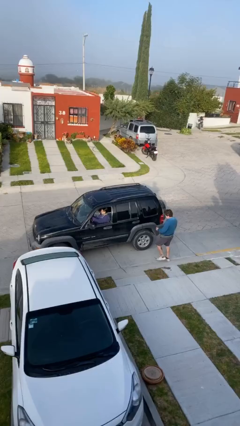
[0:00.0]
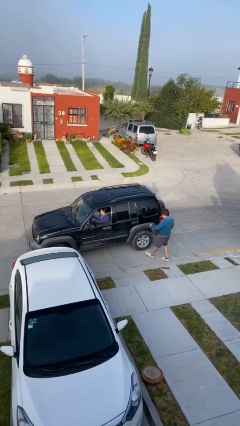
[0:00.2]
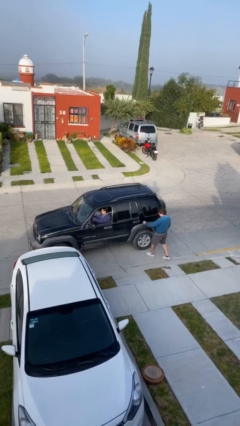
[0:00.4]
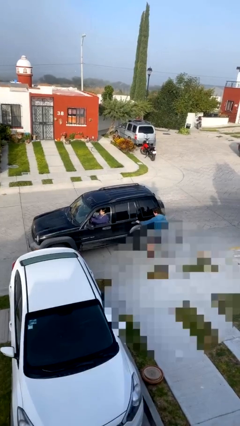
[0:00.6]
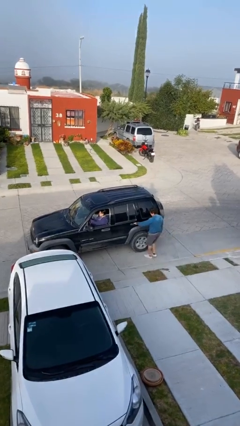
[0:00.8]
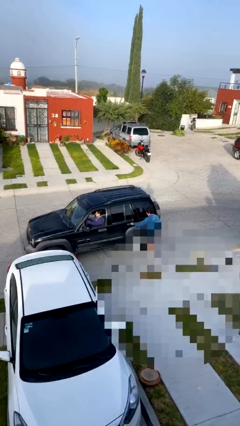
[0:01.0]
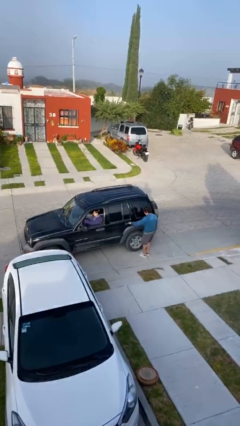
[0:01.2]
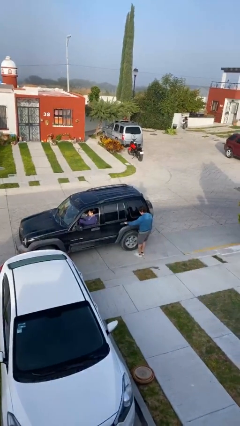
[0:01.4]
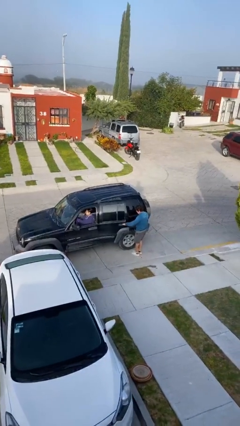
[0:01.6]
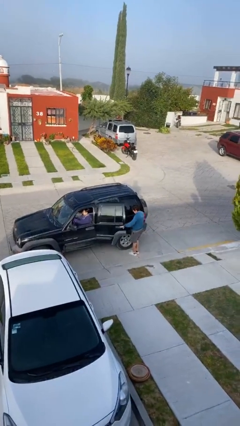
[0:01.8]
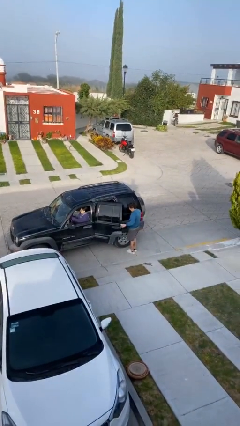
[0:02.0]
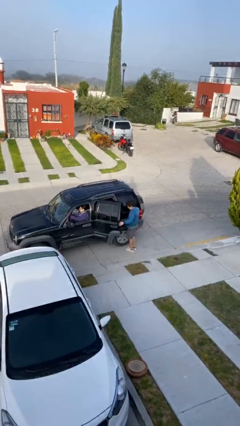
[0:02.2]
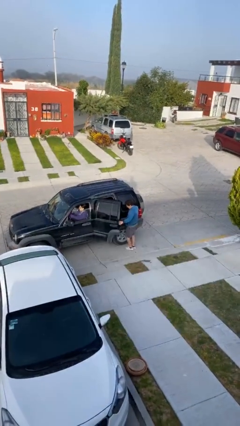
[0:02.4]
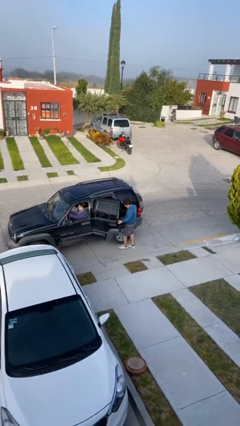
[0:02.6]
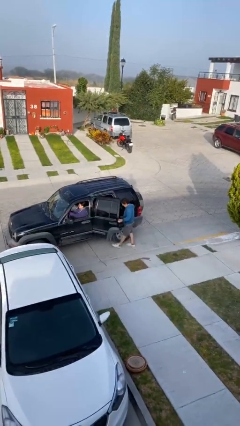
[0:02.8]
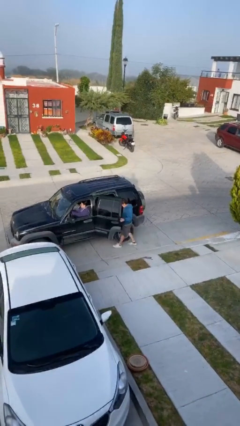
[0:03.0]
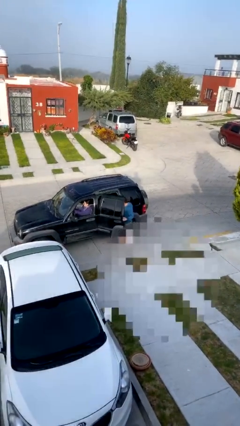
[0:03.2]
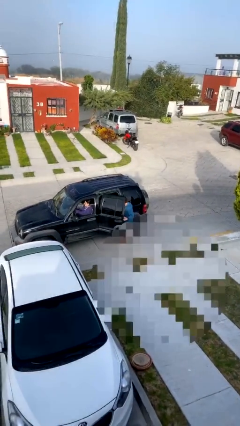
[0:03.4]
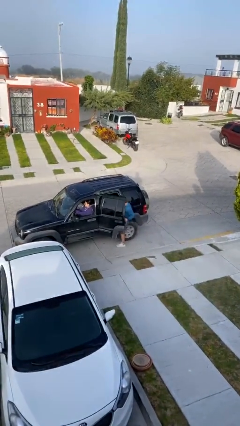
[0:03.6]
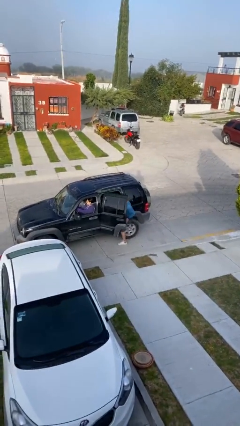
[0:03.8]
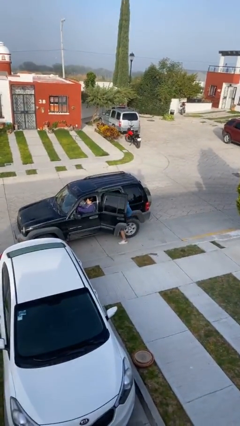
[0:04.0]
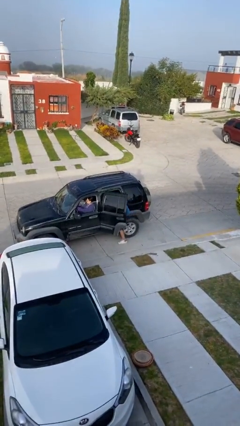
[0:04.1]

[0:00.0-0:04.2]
car picks up person

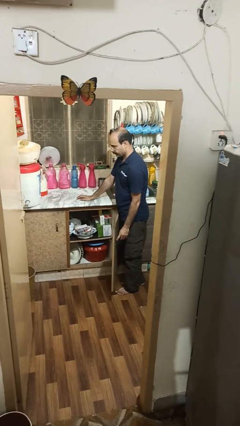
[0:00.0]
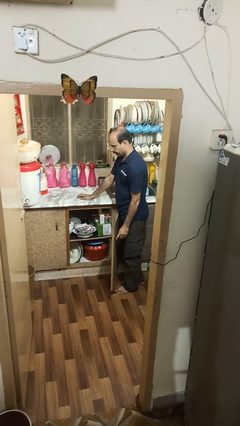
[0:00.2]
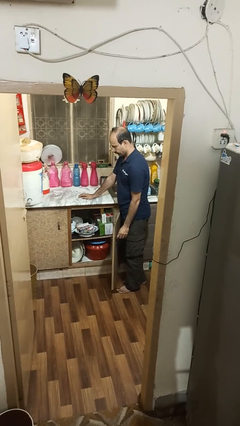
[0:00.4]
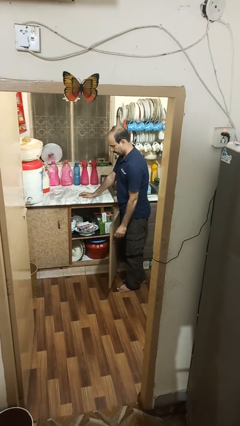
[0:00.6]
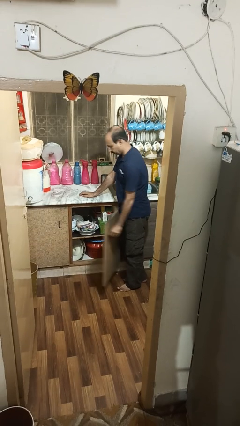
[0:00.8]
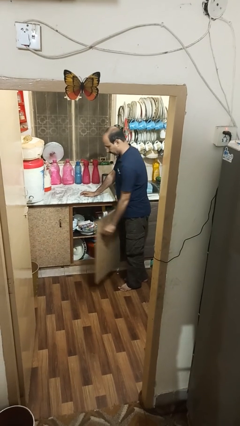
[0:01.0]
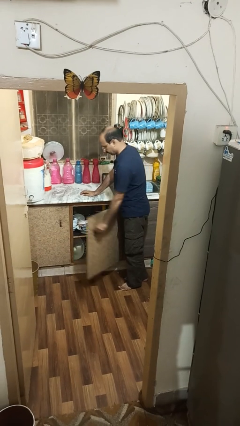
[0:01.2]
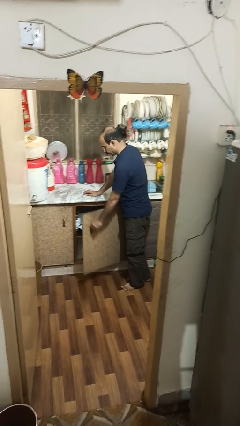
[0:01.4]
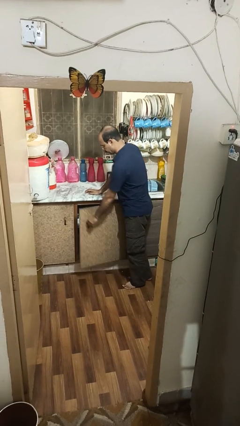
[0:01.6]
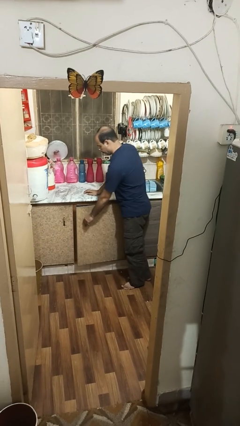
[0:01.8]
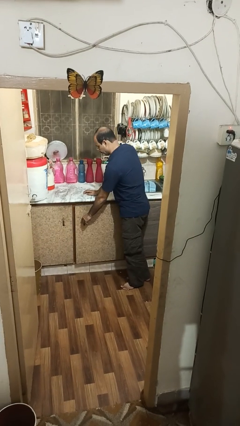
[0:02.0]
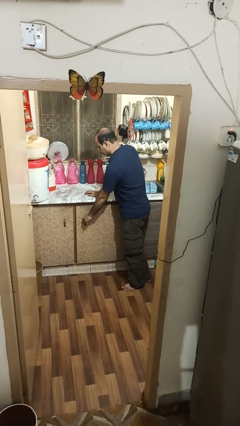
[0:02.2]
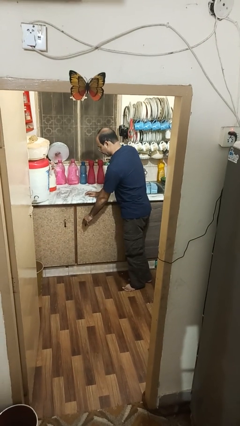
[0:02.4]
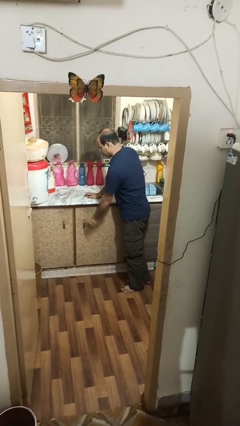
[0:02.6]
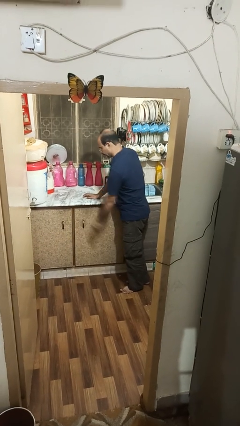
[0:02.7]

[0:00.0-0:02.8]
person closes cabinet

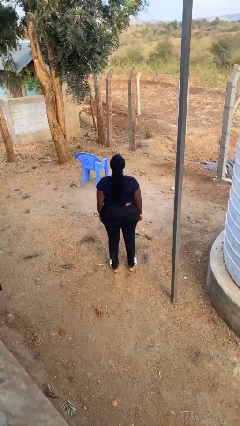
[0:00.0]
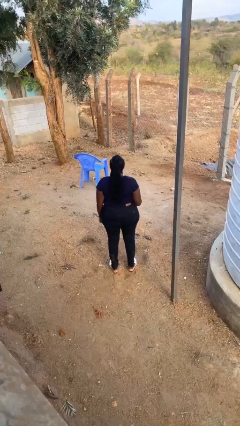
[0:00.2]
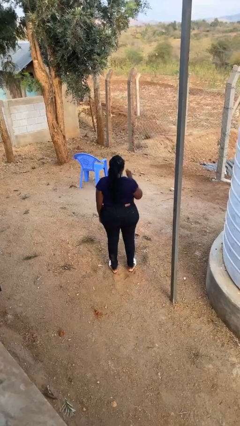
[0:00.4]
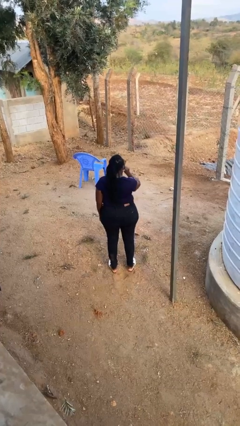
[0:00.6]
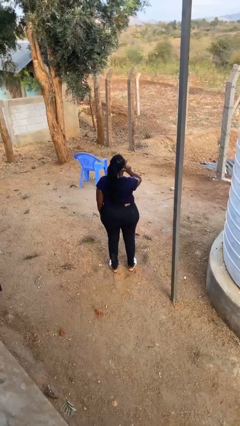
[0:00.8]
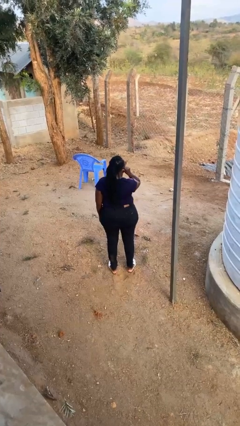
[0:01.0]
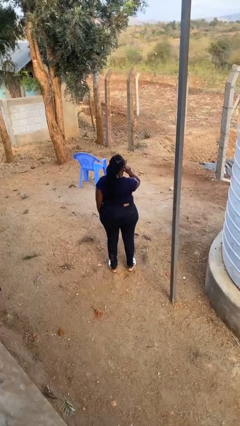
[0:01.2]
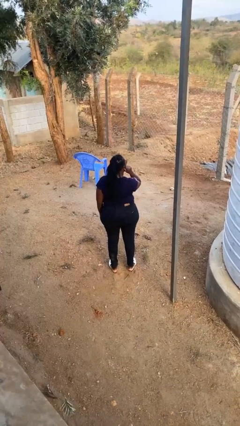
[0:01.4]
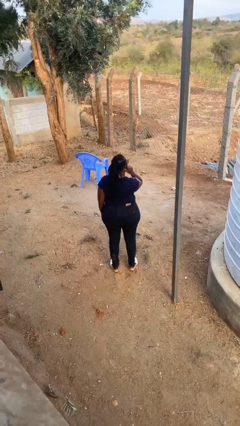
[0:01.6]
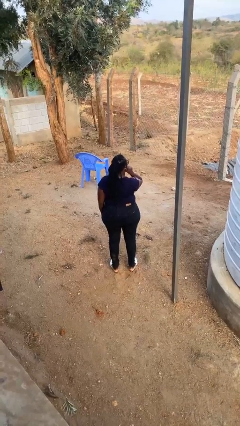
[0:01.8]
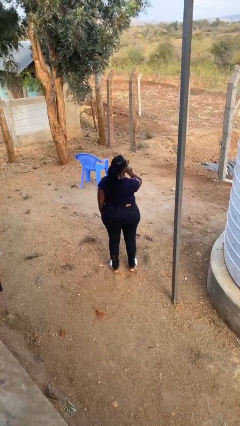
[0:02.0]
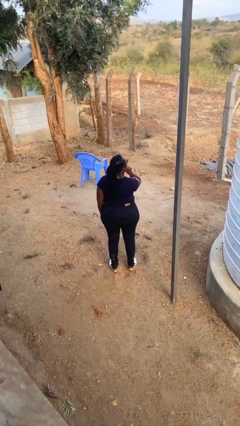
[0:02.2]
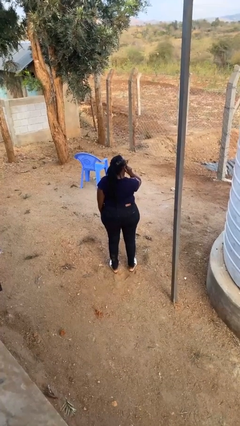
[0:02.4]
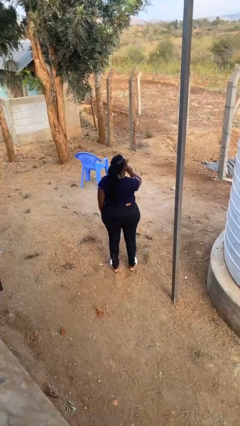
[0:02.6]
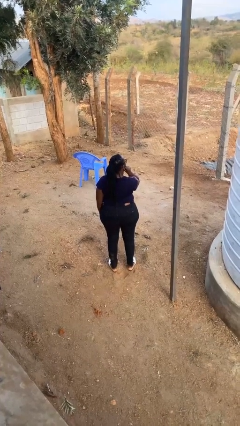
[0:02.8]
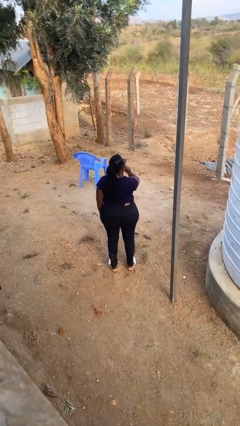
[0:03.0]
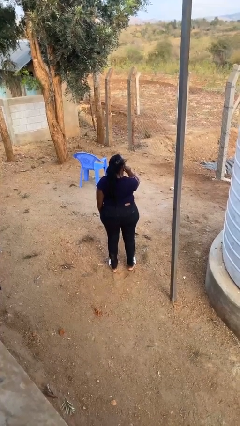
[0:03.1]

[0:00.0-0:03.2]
person touches earlobe

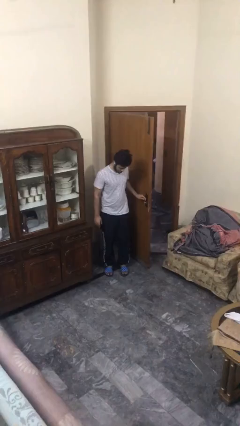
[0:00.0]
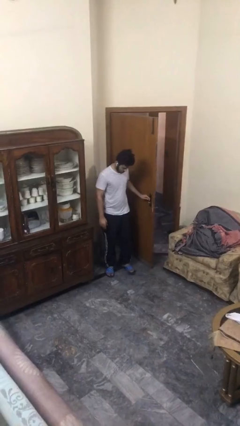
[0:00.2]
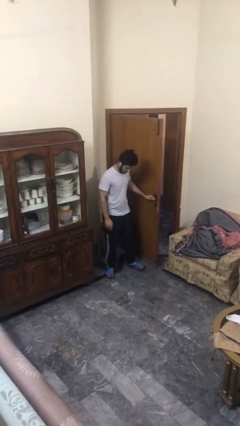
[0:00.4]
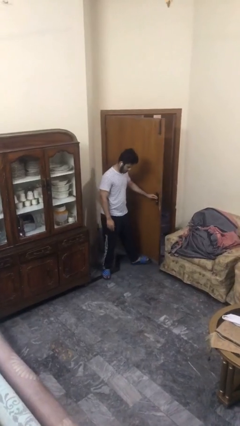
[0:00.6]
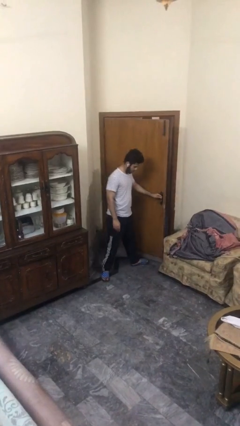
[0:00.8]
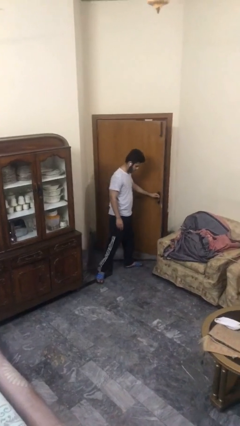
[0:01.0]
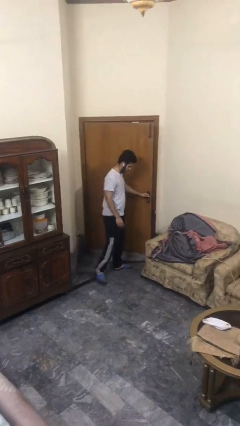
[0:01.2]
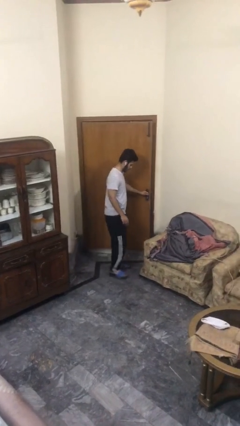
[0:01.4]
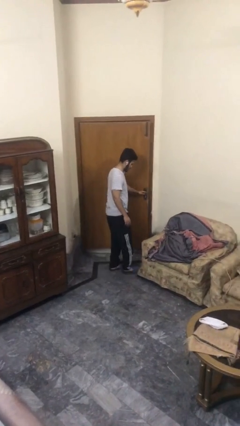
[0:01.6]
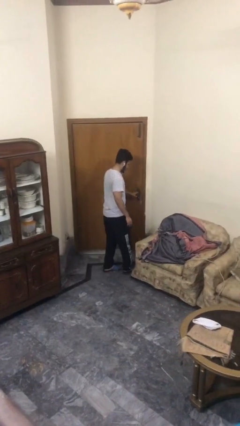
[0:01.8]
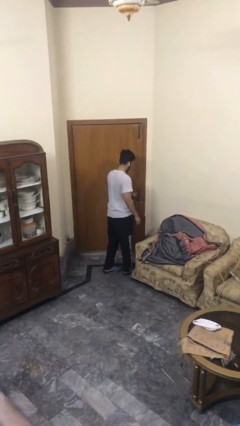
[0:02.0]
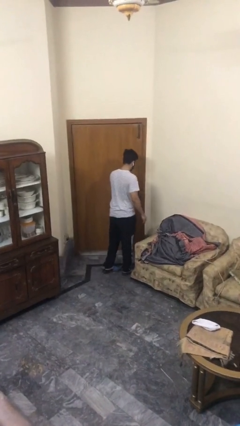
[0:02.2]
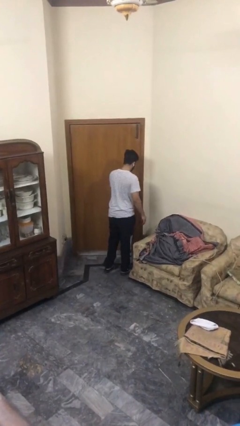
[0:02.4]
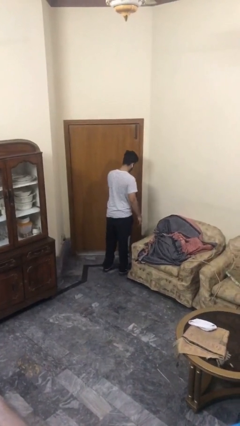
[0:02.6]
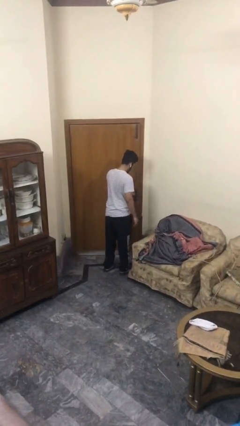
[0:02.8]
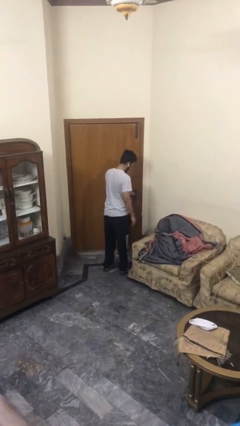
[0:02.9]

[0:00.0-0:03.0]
person closes facility door

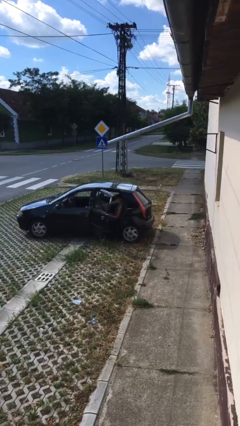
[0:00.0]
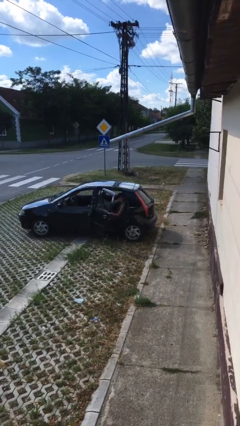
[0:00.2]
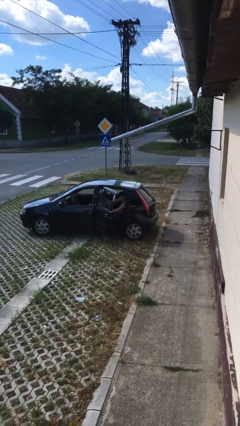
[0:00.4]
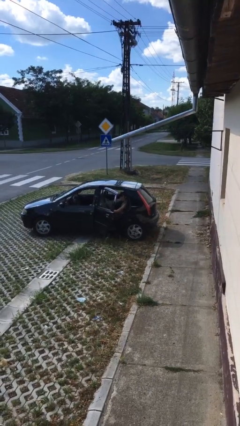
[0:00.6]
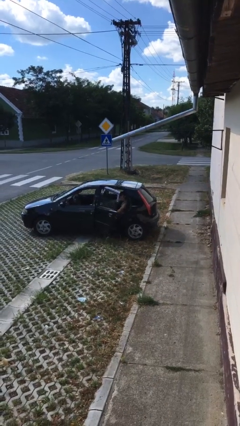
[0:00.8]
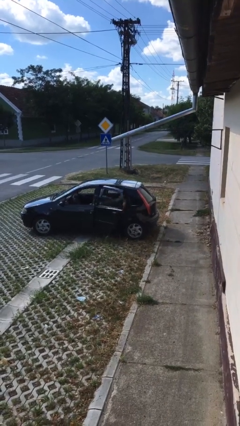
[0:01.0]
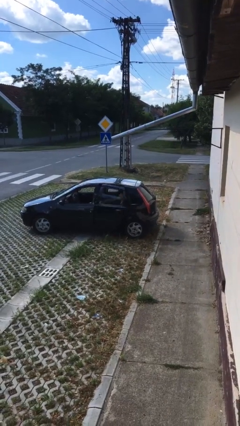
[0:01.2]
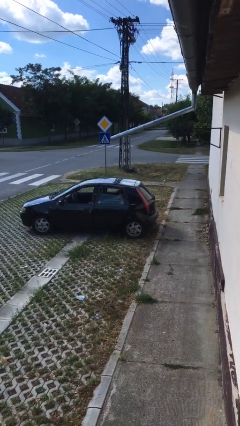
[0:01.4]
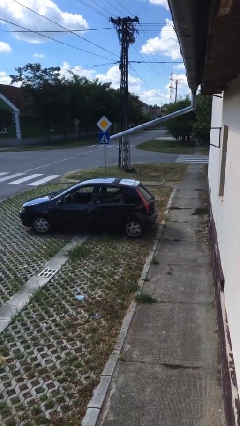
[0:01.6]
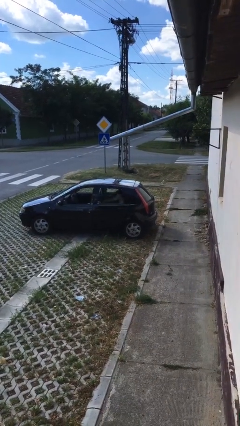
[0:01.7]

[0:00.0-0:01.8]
person closes car door

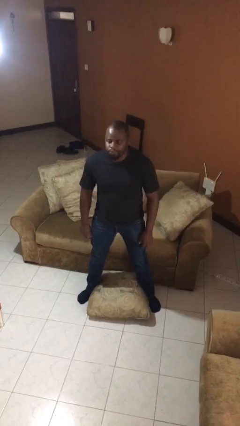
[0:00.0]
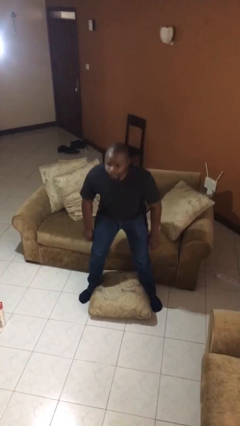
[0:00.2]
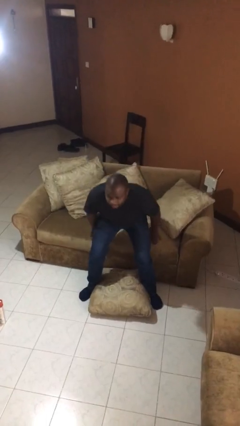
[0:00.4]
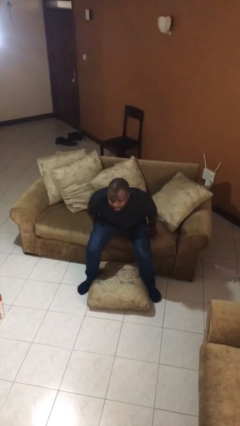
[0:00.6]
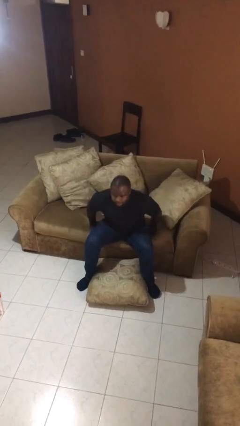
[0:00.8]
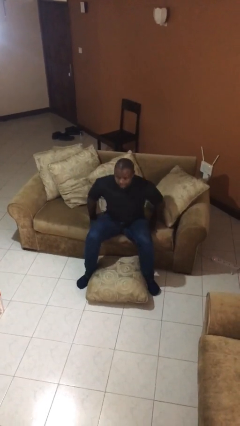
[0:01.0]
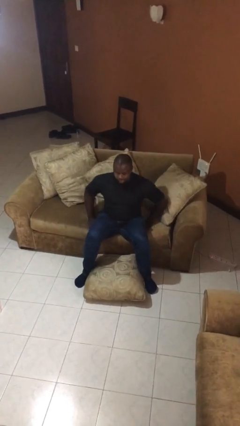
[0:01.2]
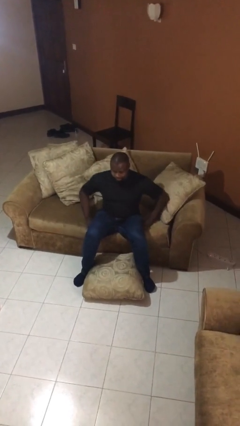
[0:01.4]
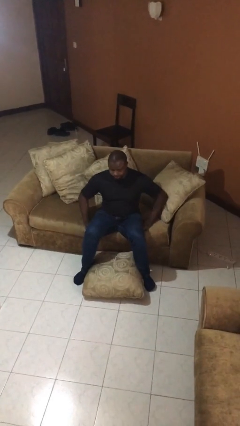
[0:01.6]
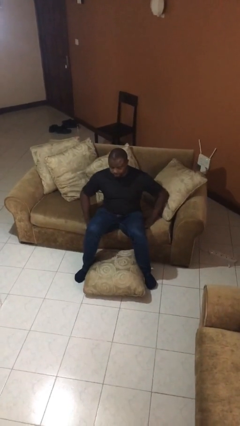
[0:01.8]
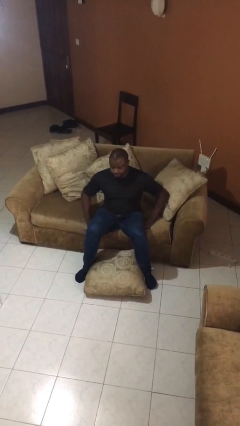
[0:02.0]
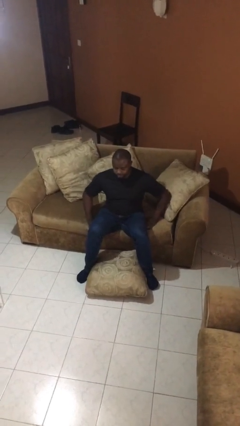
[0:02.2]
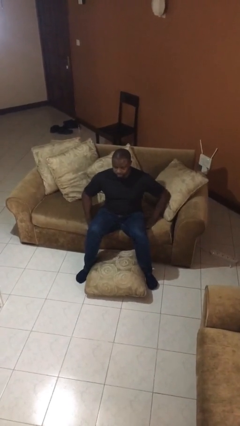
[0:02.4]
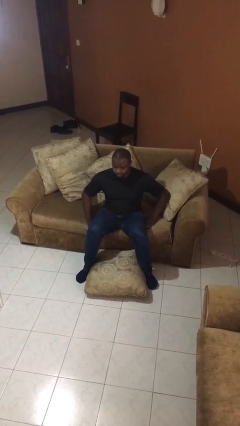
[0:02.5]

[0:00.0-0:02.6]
person sits down

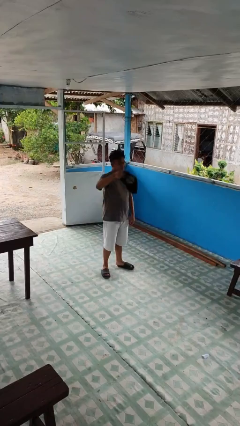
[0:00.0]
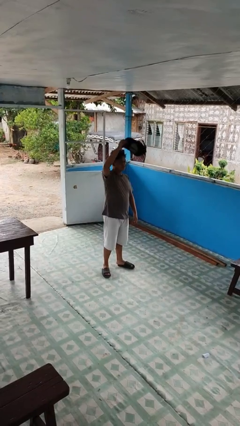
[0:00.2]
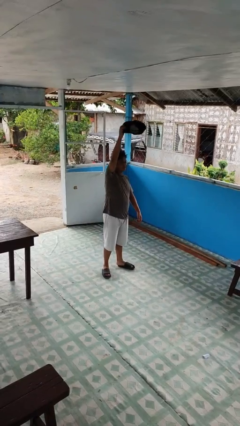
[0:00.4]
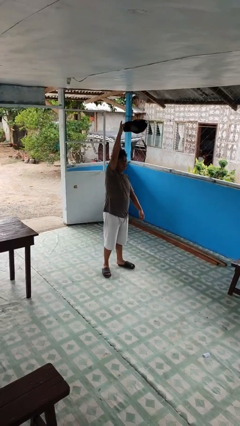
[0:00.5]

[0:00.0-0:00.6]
person drops object
